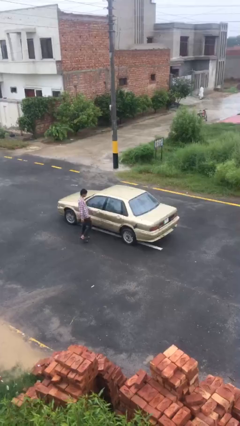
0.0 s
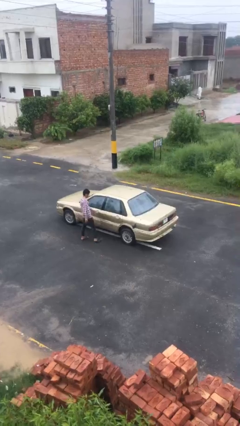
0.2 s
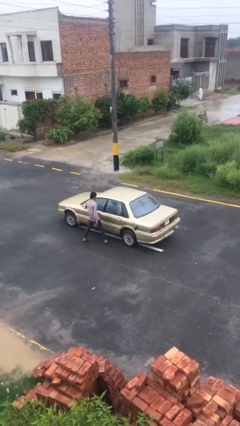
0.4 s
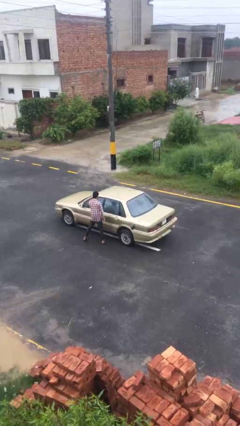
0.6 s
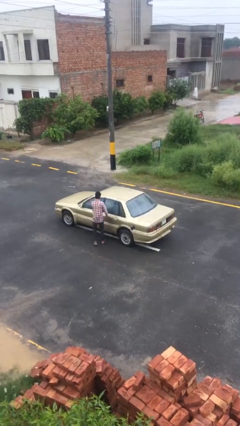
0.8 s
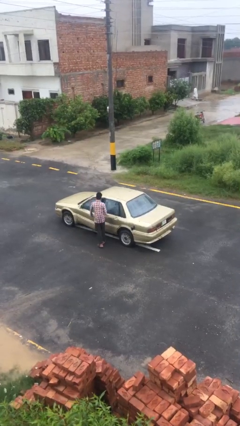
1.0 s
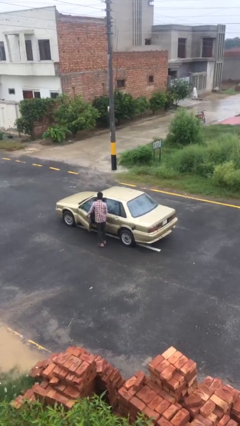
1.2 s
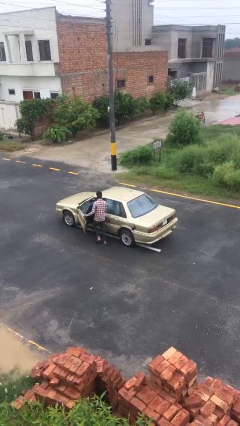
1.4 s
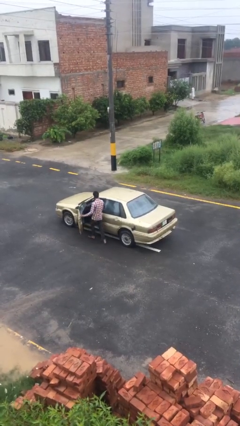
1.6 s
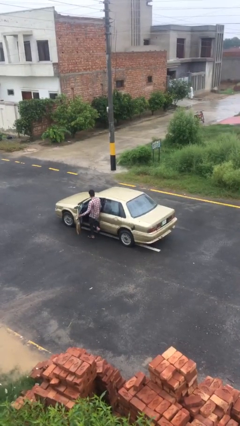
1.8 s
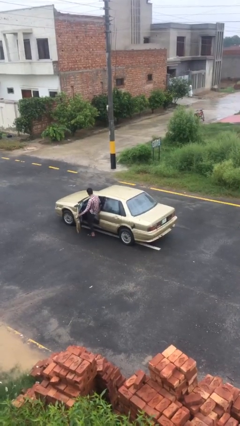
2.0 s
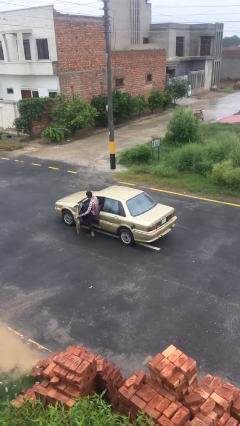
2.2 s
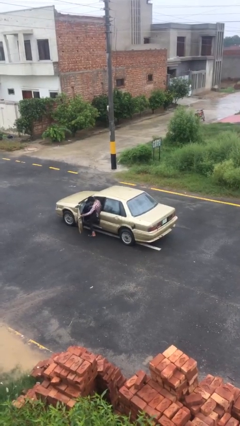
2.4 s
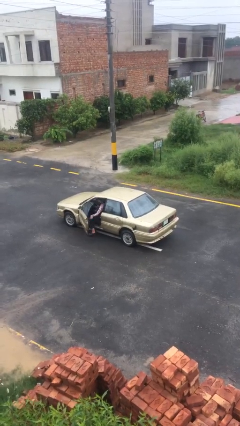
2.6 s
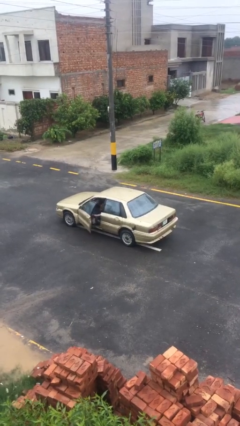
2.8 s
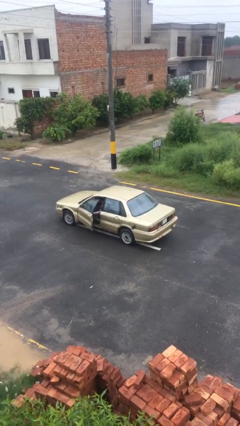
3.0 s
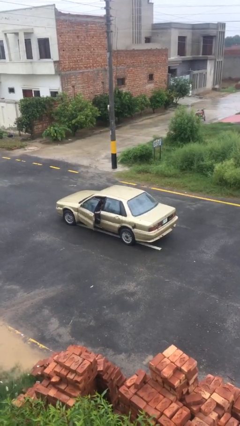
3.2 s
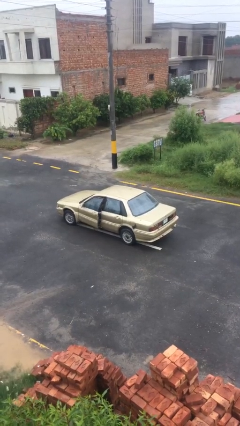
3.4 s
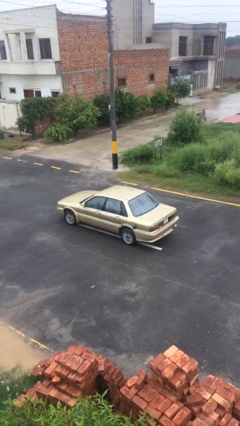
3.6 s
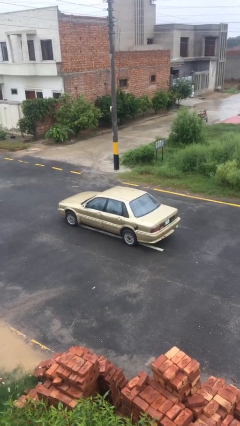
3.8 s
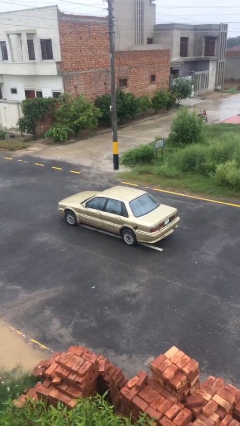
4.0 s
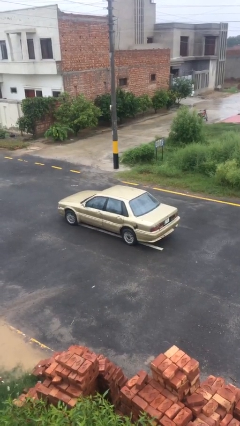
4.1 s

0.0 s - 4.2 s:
car picks up person

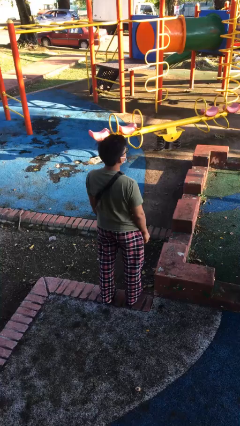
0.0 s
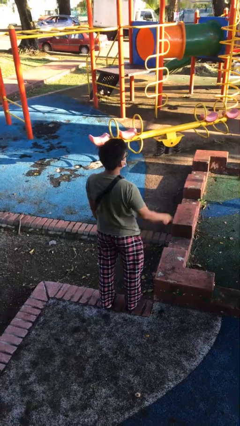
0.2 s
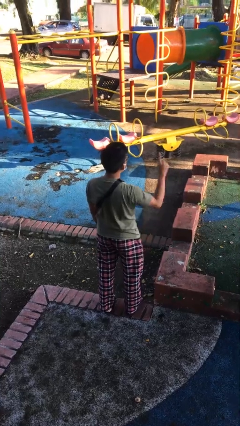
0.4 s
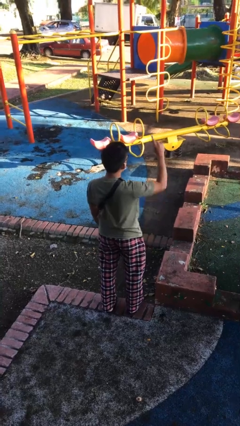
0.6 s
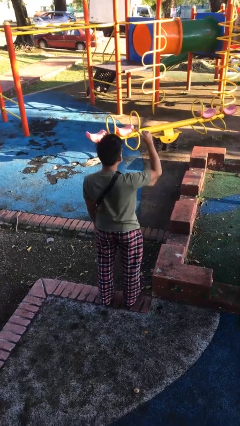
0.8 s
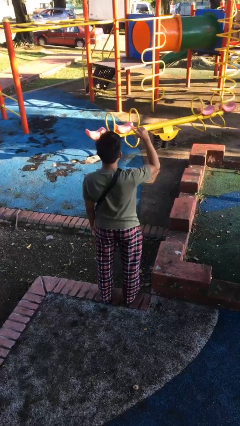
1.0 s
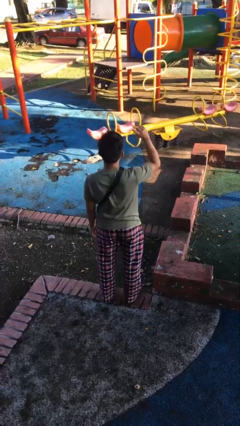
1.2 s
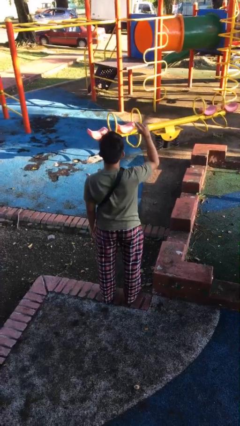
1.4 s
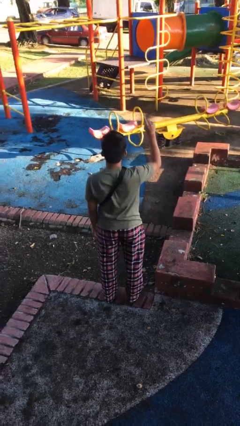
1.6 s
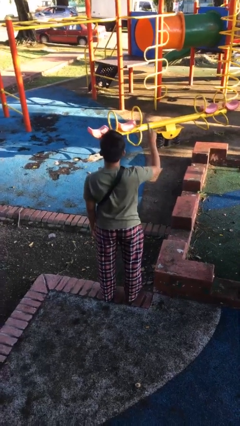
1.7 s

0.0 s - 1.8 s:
person gestures number one

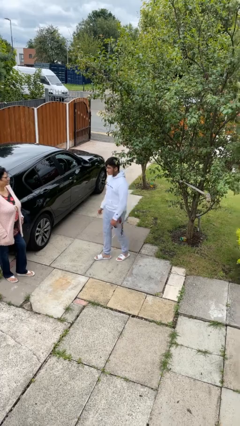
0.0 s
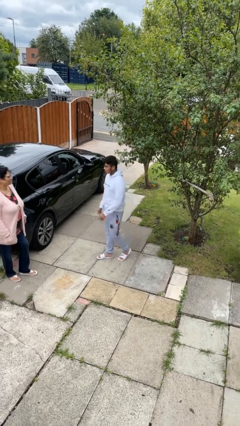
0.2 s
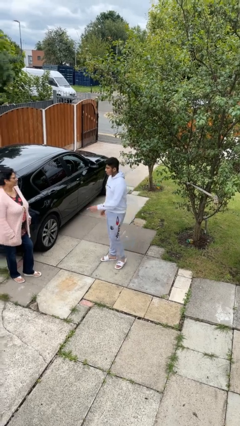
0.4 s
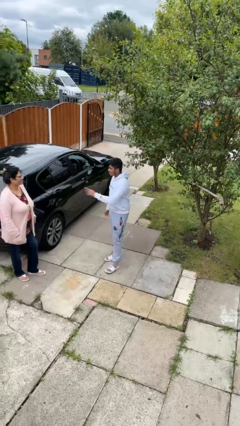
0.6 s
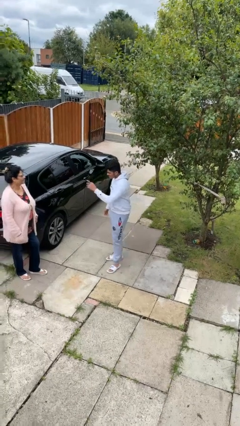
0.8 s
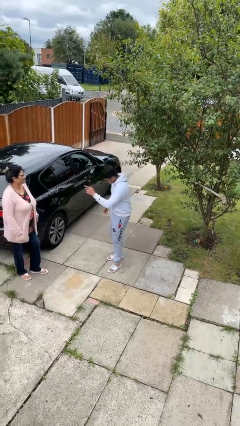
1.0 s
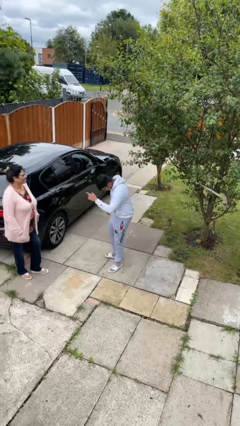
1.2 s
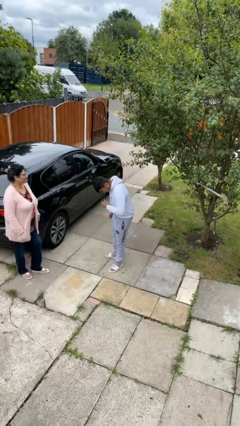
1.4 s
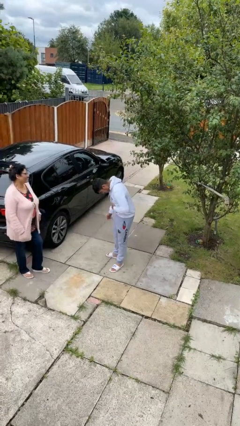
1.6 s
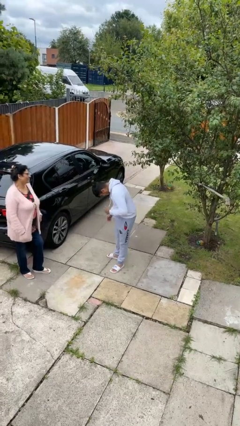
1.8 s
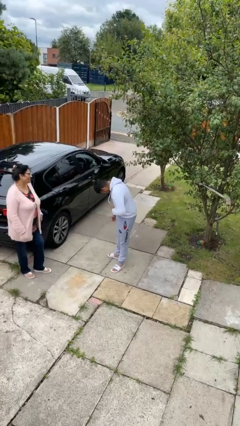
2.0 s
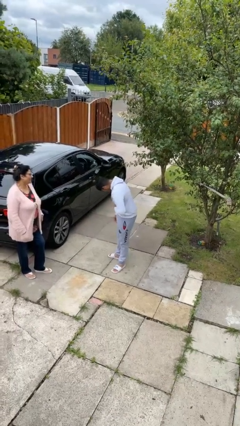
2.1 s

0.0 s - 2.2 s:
person laughs with person

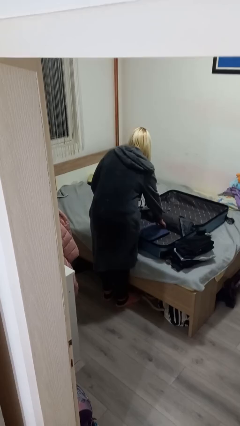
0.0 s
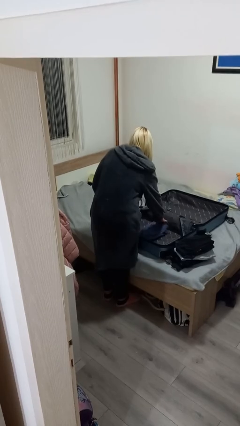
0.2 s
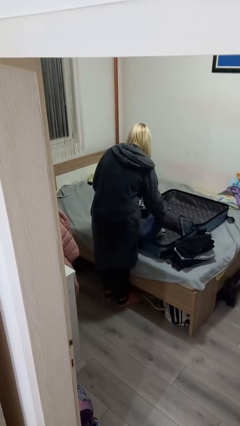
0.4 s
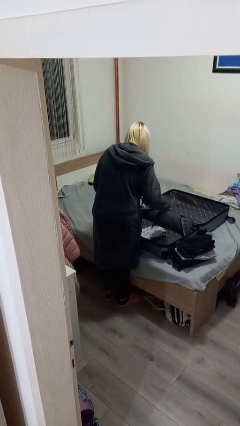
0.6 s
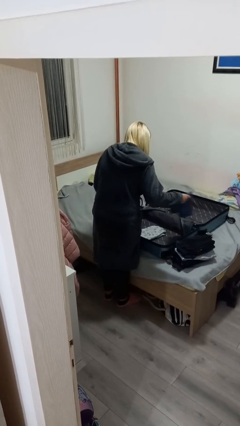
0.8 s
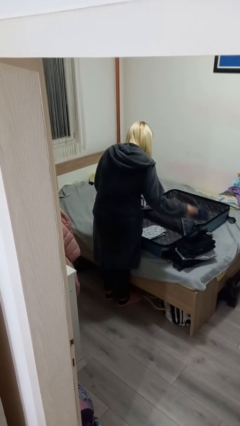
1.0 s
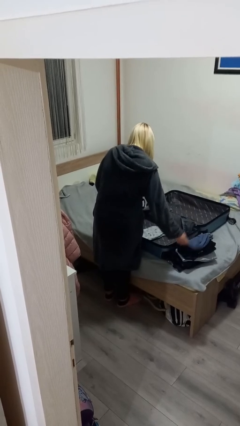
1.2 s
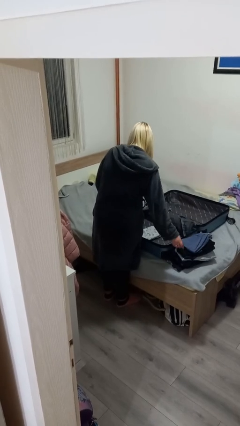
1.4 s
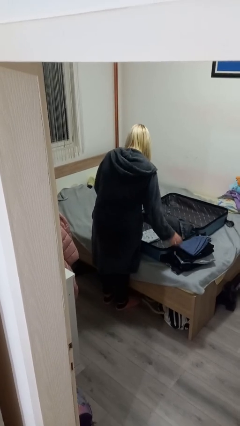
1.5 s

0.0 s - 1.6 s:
person unloads clothes from suitcase

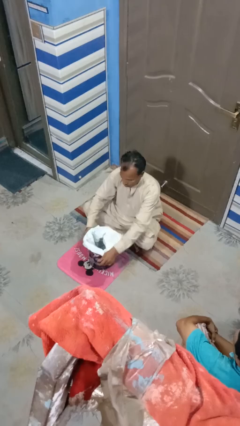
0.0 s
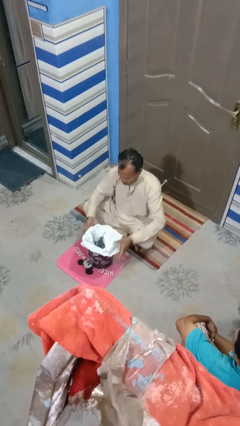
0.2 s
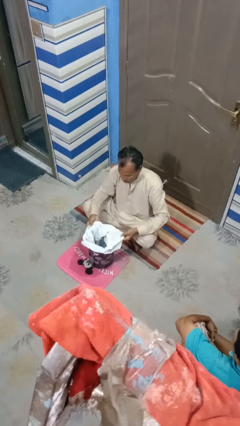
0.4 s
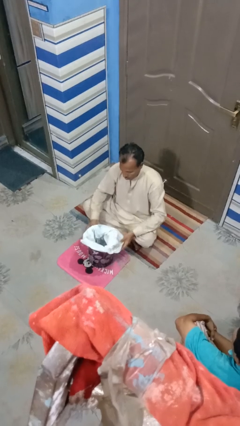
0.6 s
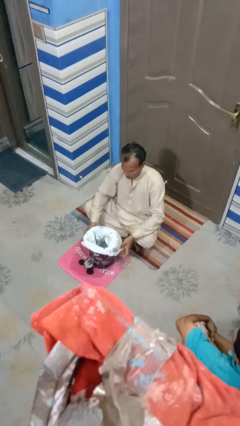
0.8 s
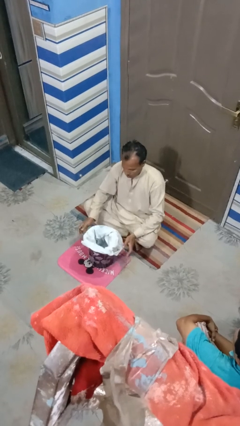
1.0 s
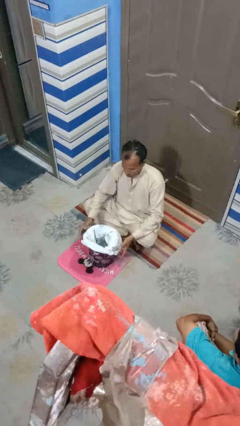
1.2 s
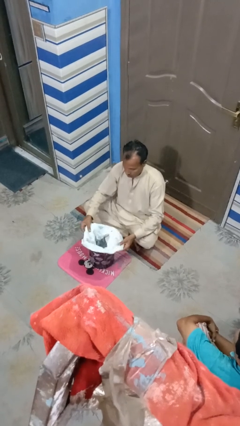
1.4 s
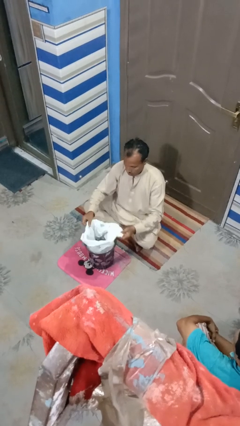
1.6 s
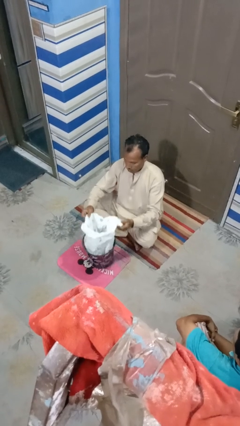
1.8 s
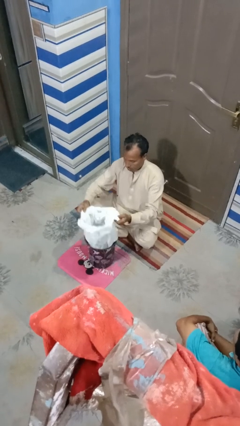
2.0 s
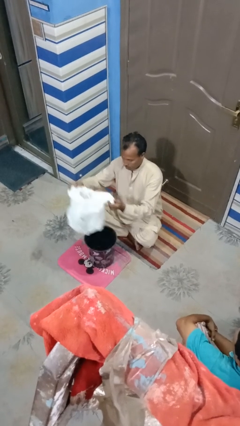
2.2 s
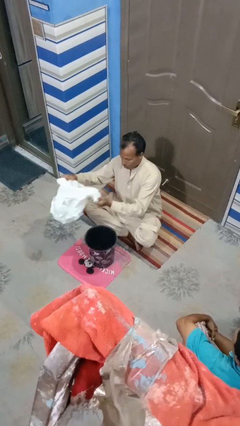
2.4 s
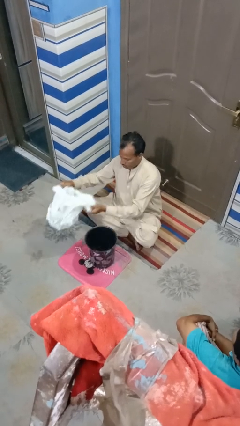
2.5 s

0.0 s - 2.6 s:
person inserts trashbag into trashcan

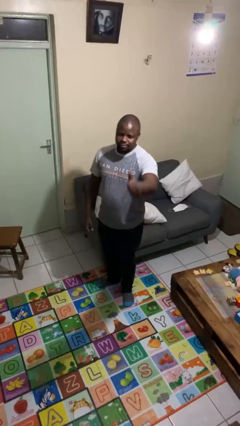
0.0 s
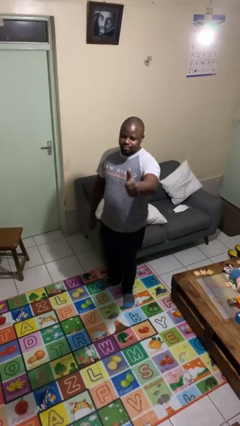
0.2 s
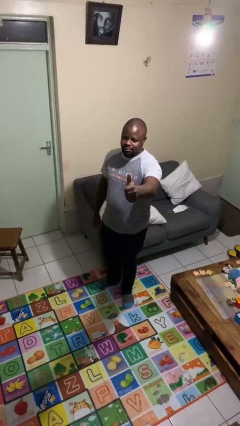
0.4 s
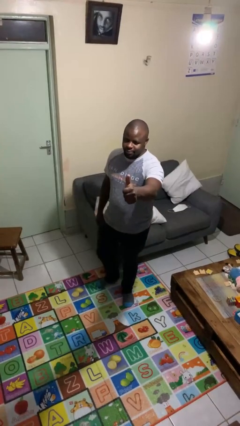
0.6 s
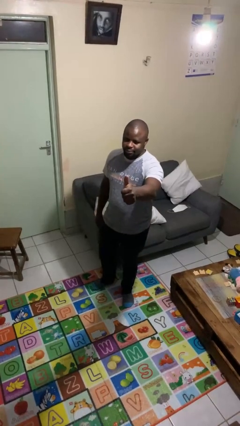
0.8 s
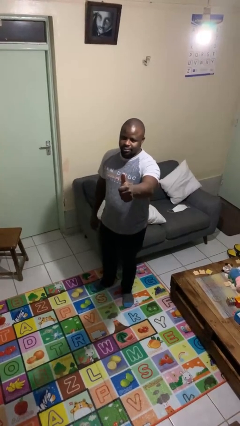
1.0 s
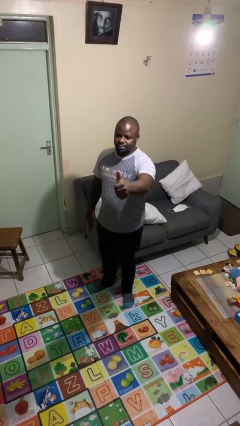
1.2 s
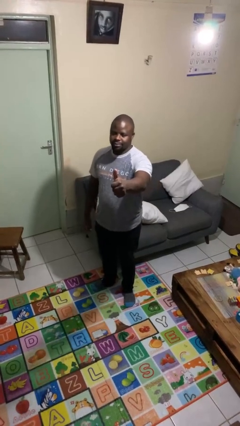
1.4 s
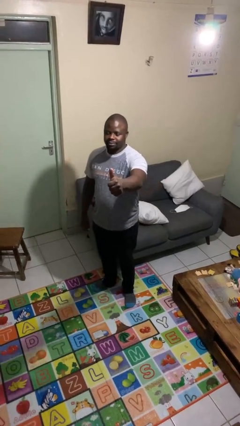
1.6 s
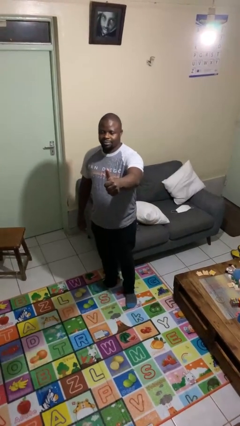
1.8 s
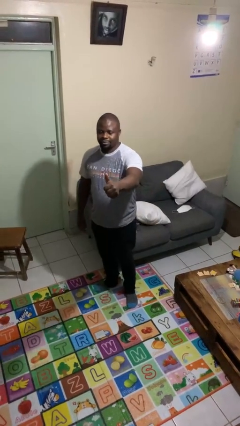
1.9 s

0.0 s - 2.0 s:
person gestures thumbs up

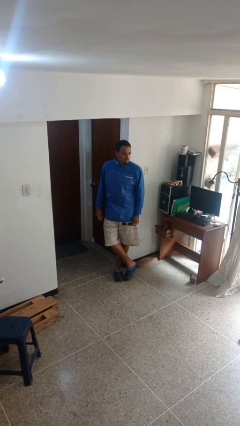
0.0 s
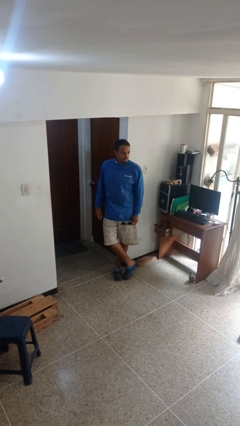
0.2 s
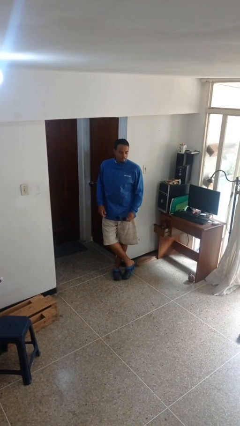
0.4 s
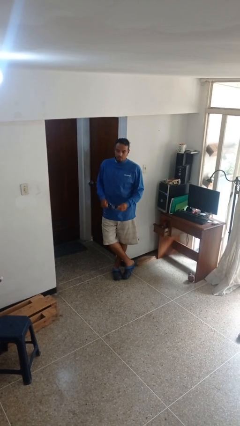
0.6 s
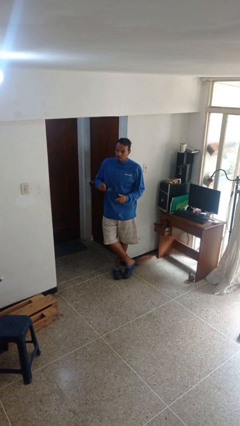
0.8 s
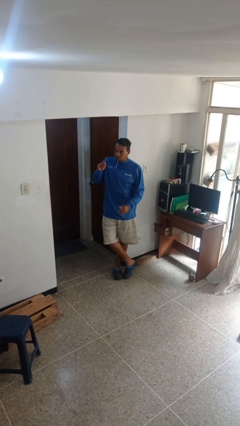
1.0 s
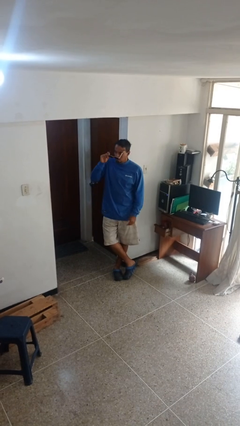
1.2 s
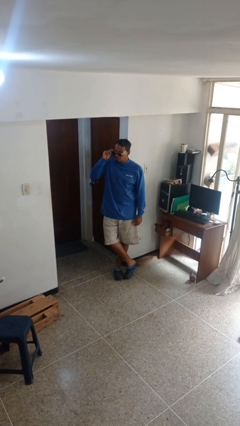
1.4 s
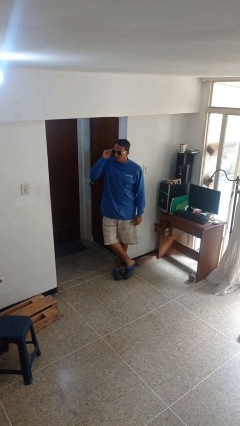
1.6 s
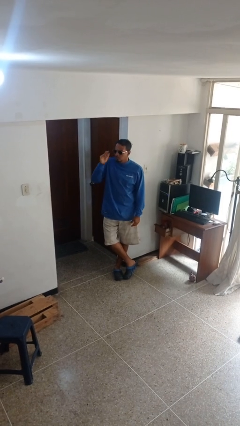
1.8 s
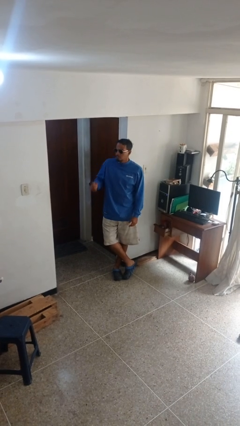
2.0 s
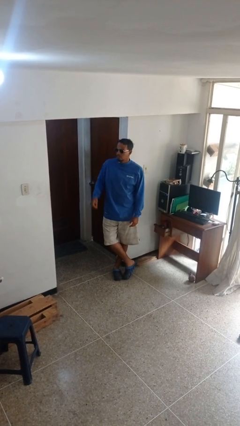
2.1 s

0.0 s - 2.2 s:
person puts on sunglasses
